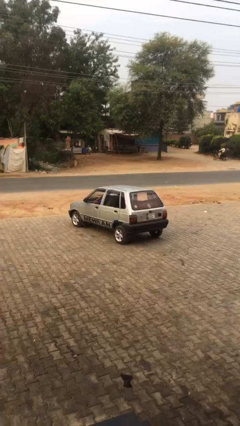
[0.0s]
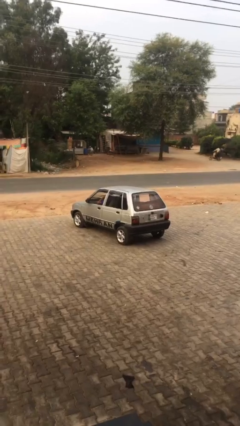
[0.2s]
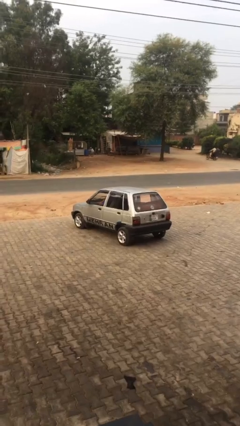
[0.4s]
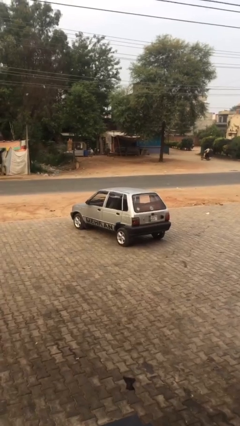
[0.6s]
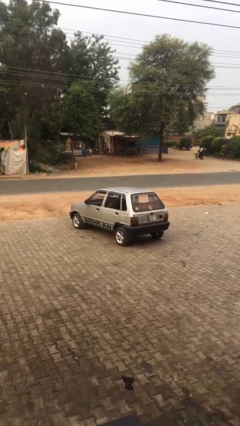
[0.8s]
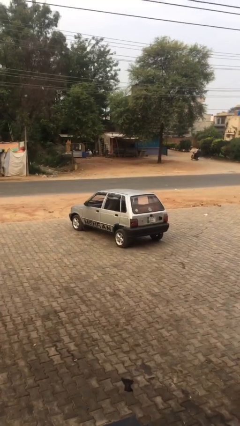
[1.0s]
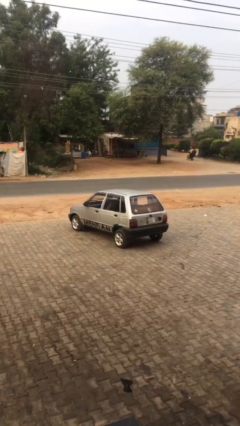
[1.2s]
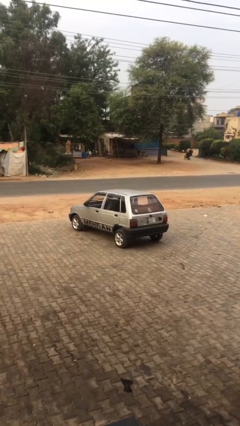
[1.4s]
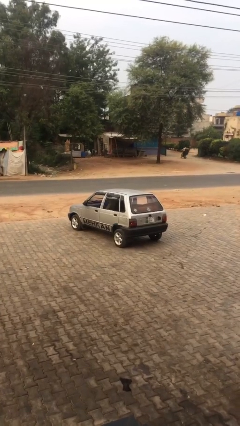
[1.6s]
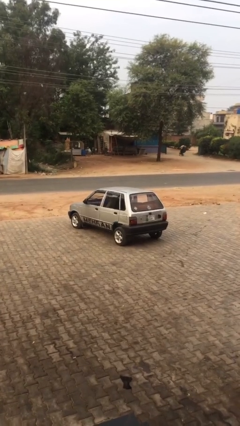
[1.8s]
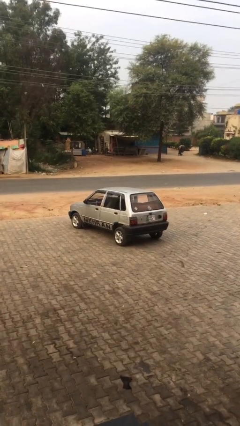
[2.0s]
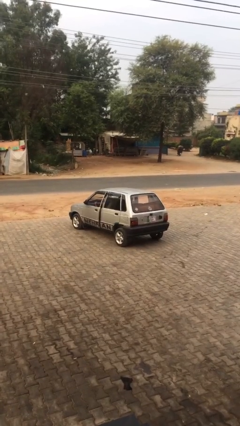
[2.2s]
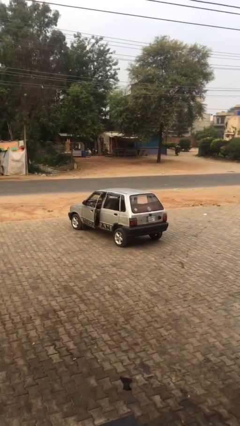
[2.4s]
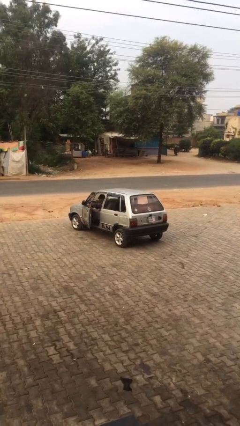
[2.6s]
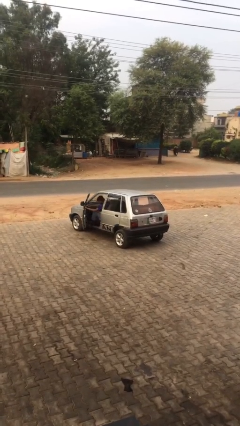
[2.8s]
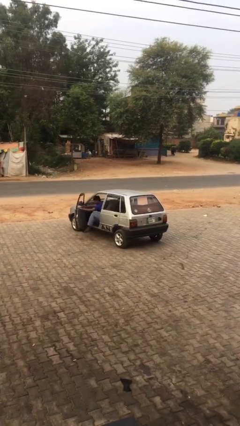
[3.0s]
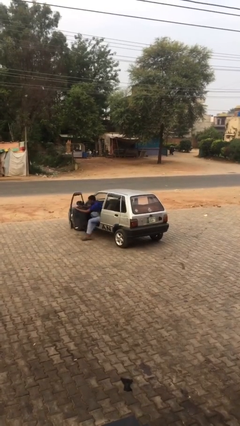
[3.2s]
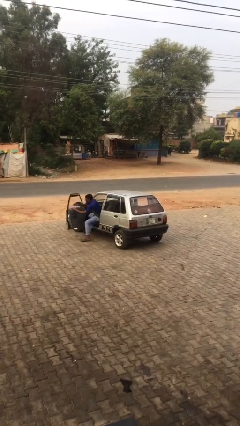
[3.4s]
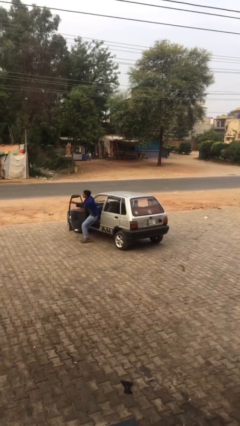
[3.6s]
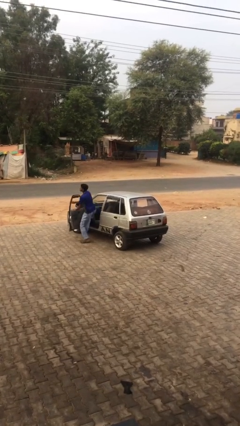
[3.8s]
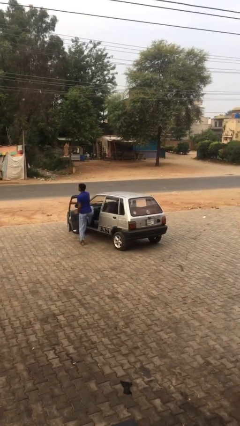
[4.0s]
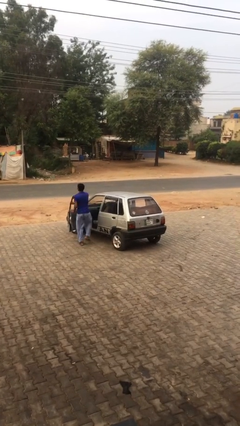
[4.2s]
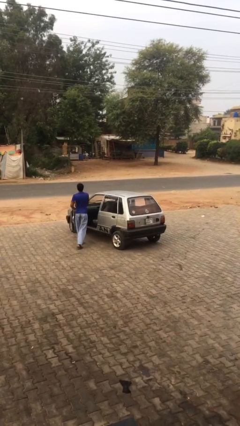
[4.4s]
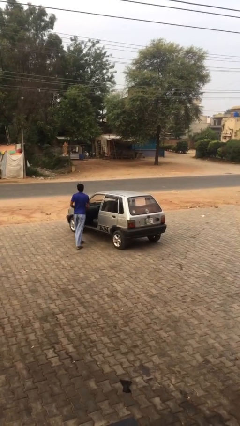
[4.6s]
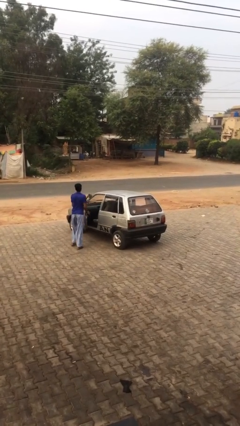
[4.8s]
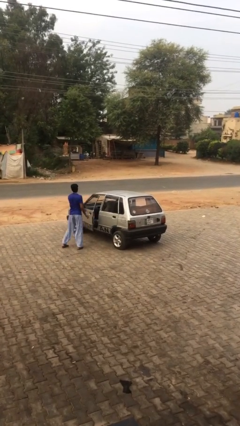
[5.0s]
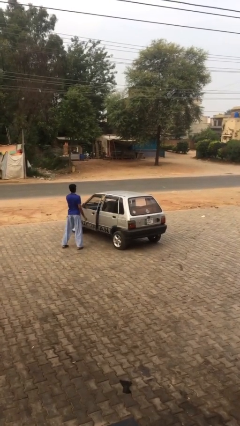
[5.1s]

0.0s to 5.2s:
car drops off person

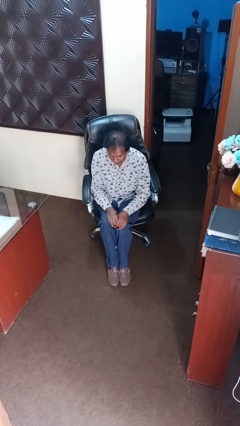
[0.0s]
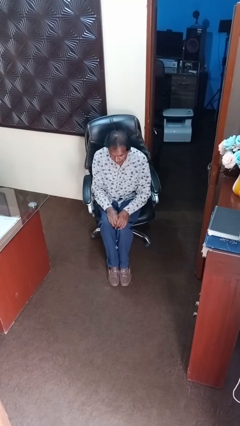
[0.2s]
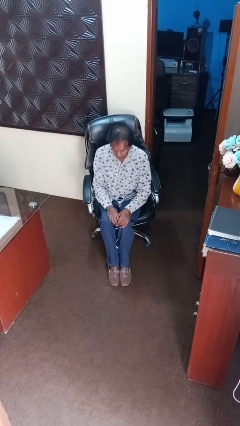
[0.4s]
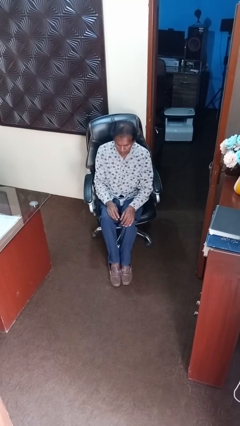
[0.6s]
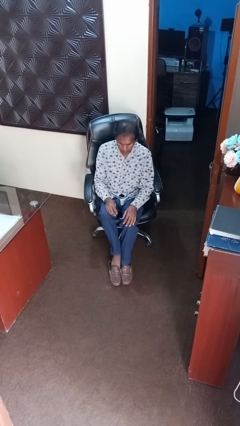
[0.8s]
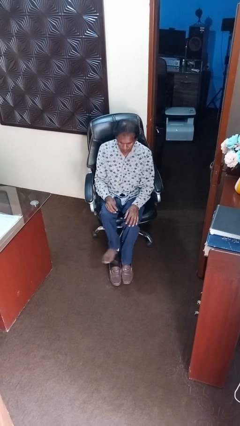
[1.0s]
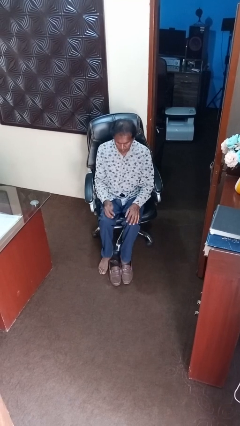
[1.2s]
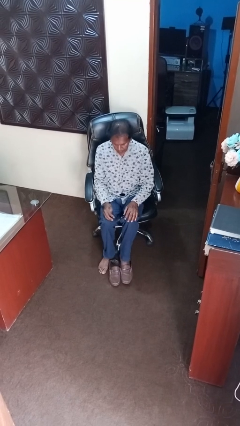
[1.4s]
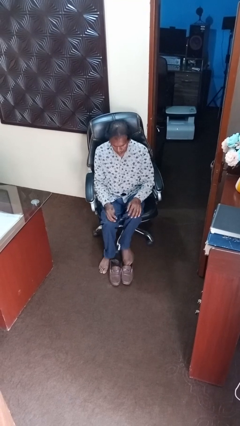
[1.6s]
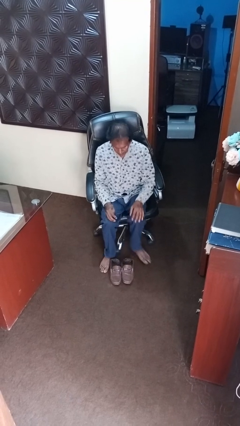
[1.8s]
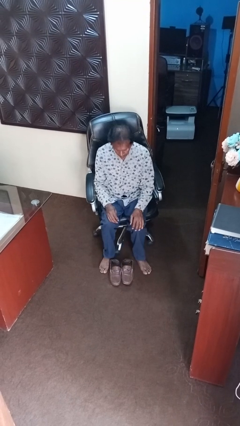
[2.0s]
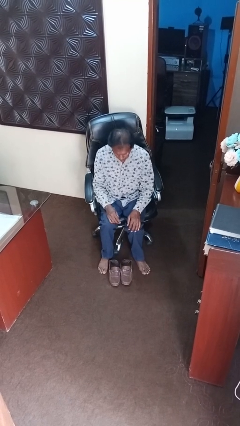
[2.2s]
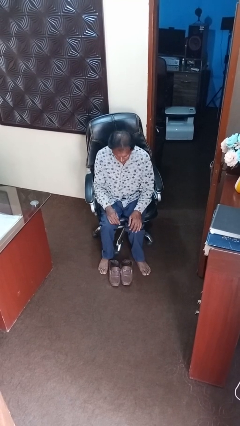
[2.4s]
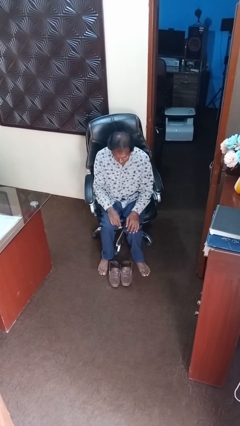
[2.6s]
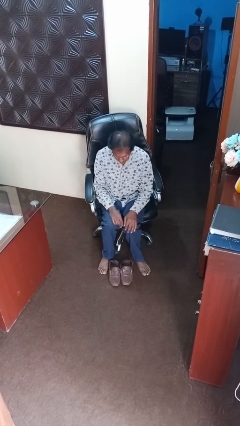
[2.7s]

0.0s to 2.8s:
person takes off shoes

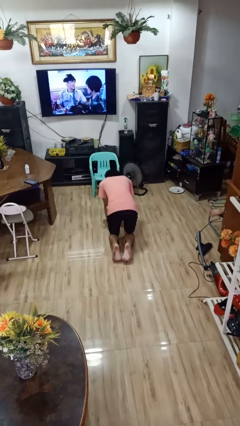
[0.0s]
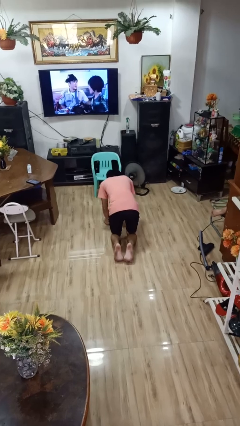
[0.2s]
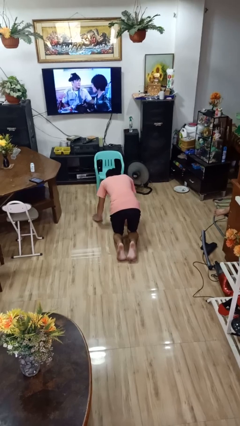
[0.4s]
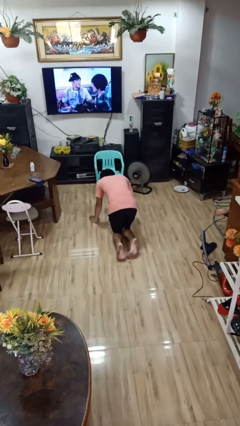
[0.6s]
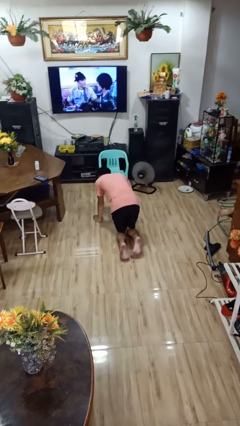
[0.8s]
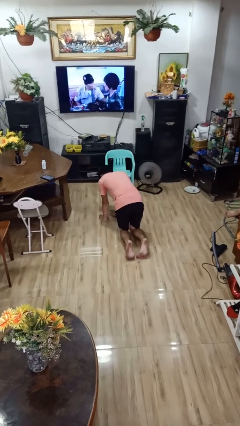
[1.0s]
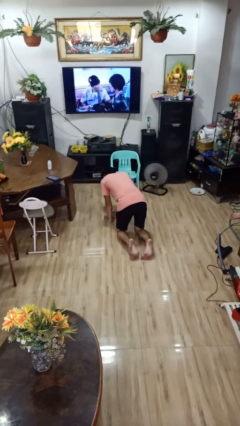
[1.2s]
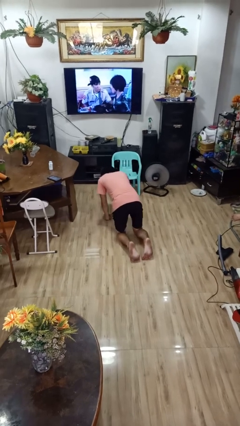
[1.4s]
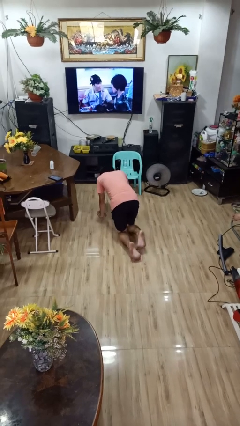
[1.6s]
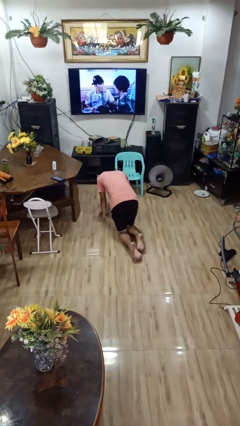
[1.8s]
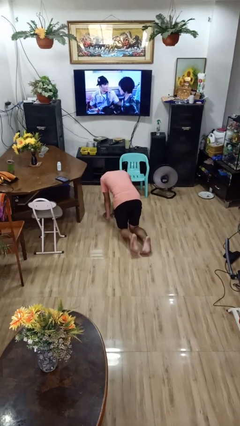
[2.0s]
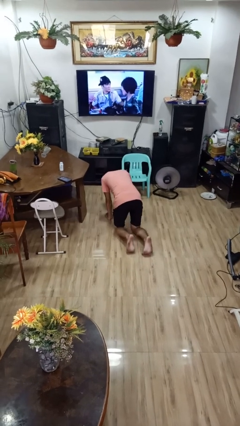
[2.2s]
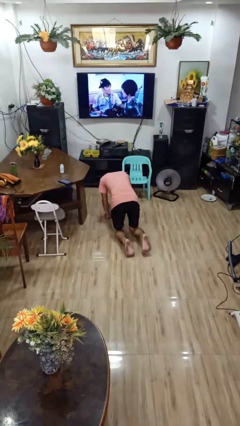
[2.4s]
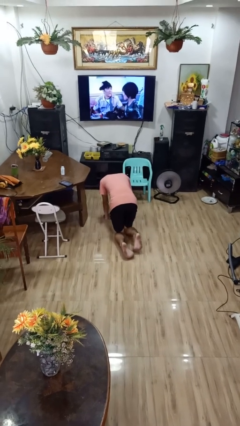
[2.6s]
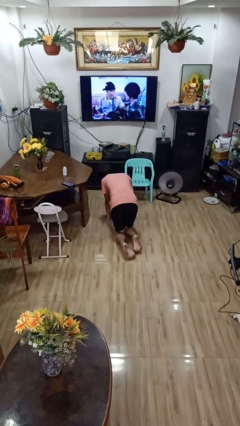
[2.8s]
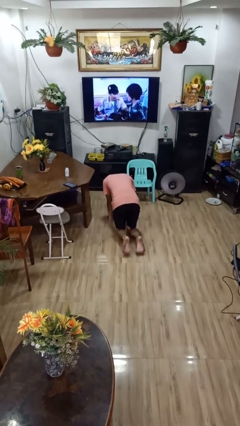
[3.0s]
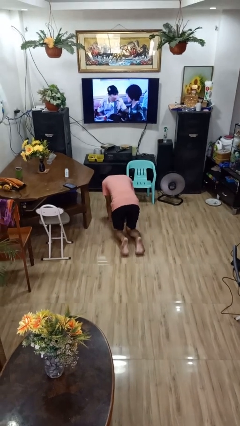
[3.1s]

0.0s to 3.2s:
person crawls

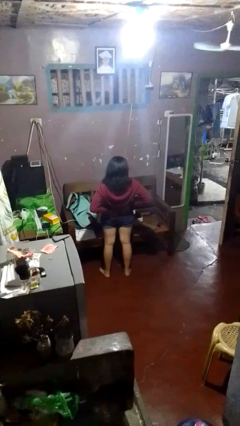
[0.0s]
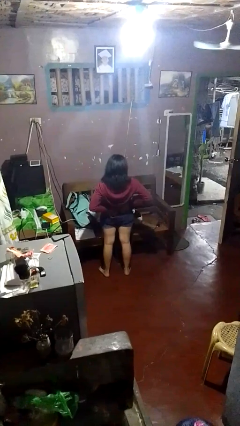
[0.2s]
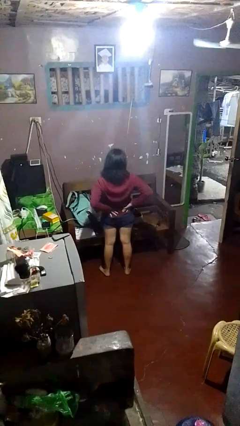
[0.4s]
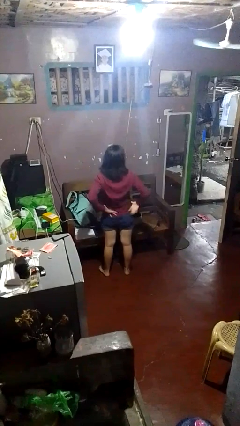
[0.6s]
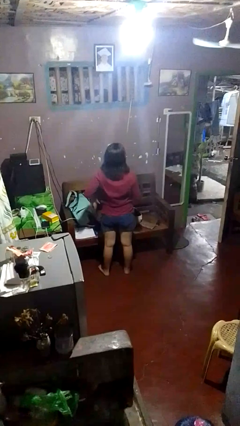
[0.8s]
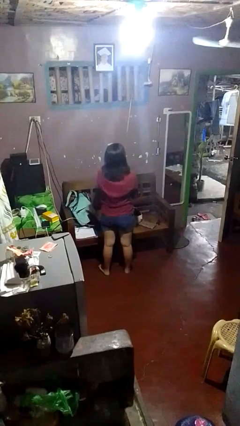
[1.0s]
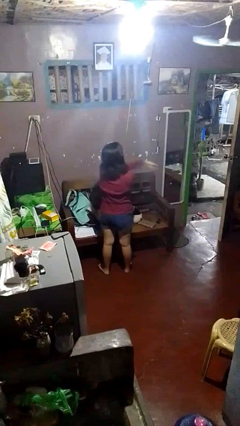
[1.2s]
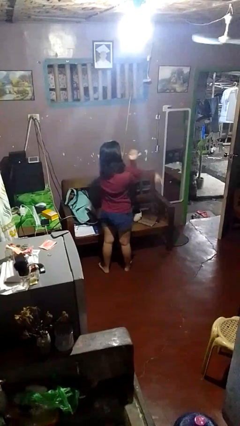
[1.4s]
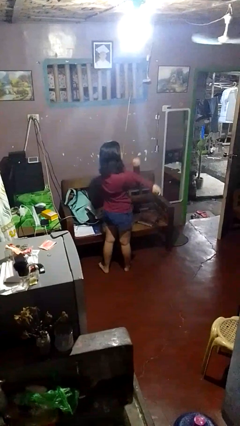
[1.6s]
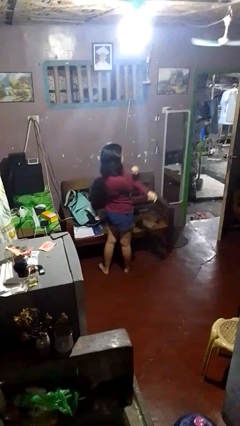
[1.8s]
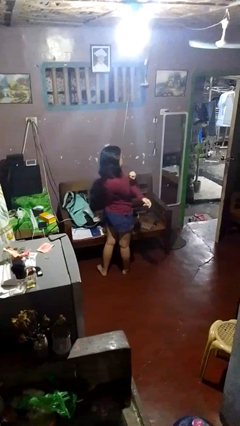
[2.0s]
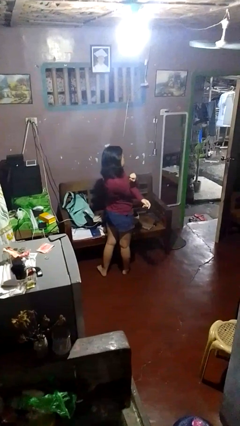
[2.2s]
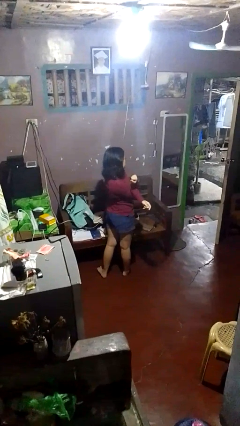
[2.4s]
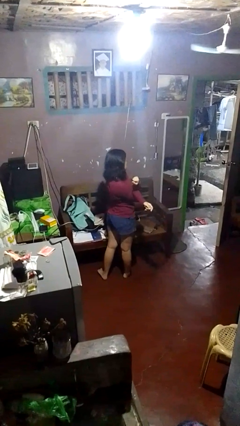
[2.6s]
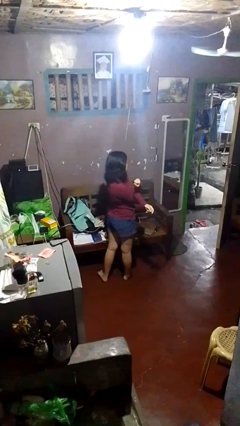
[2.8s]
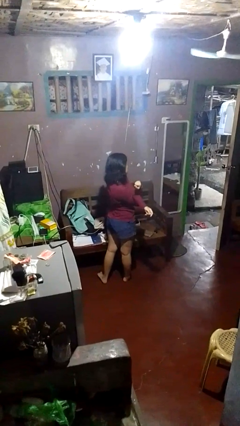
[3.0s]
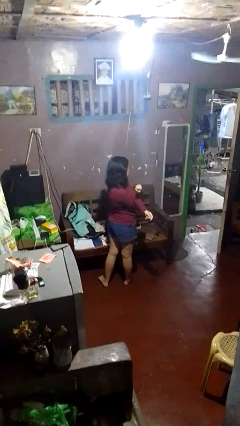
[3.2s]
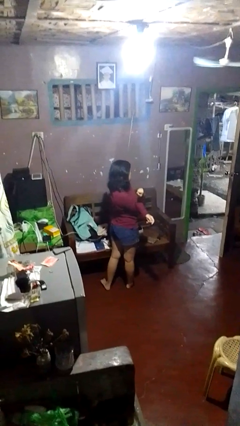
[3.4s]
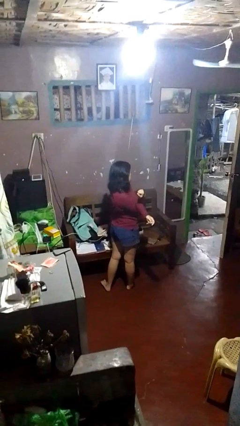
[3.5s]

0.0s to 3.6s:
person stretches arms to side

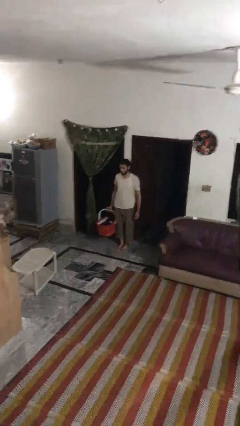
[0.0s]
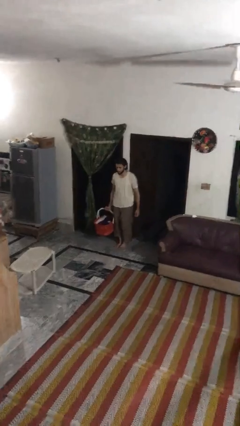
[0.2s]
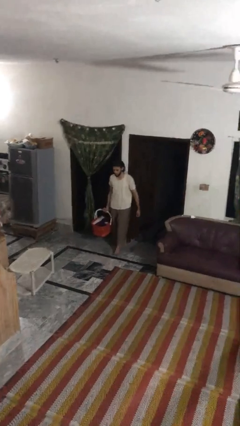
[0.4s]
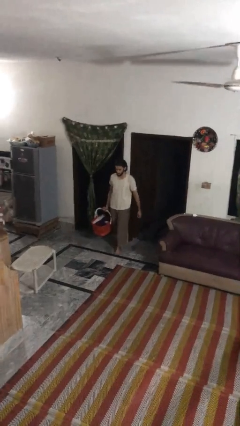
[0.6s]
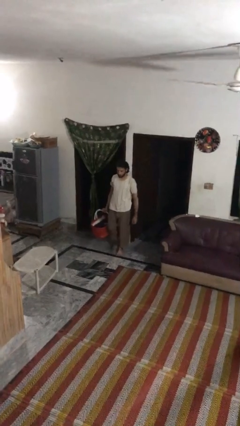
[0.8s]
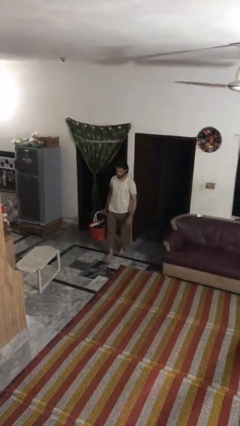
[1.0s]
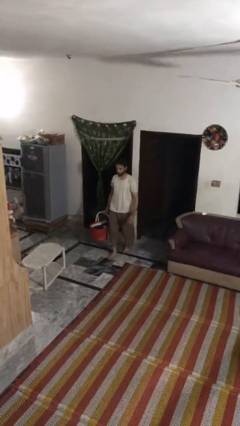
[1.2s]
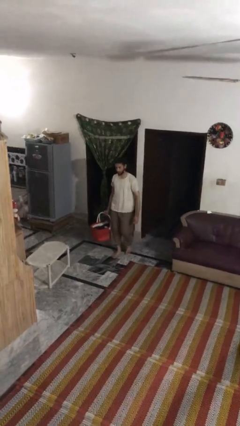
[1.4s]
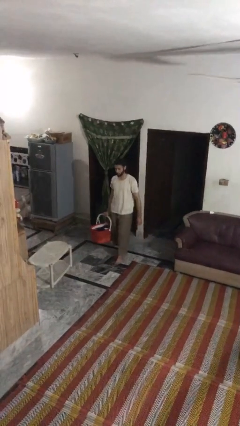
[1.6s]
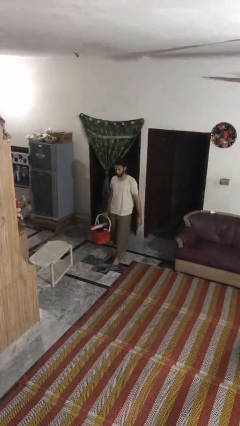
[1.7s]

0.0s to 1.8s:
person carries laundry basket

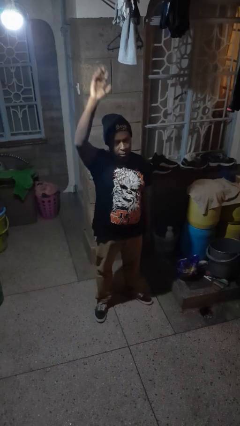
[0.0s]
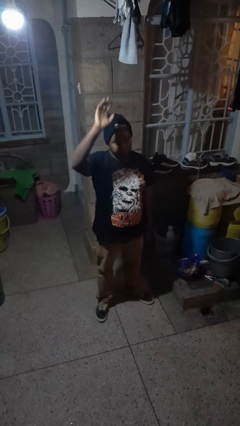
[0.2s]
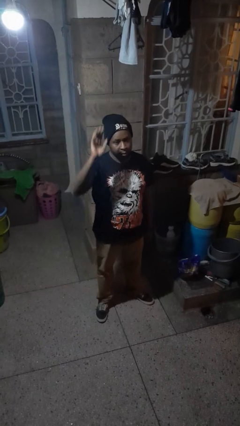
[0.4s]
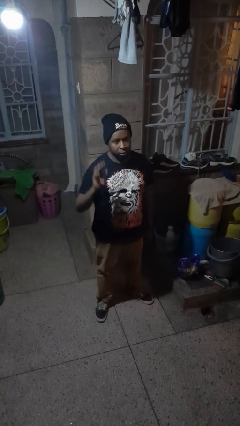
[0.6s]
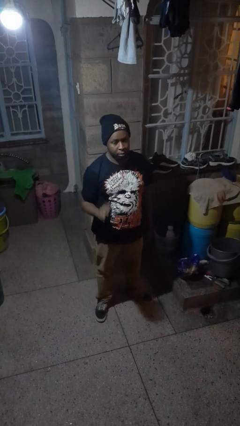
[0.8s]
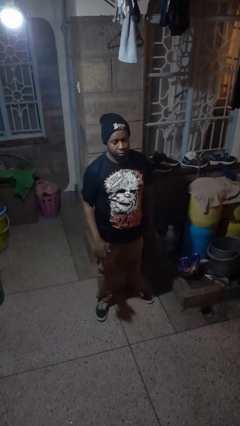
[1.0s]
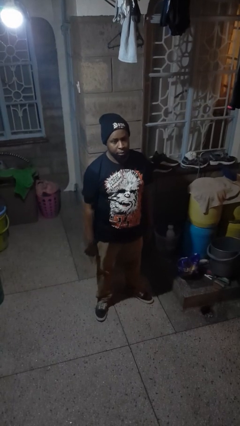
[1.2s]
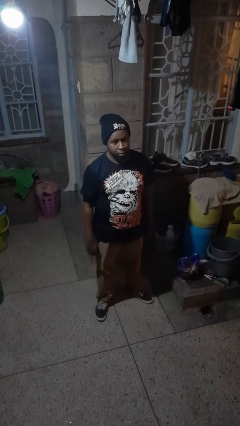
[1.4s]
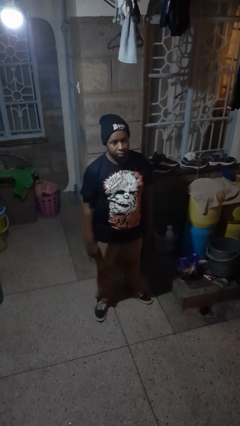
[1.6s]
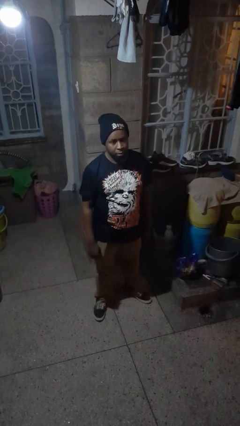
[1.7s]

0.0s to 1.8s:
person gestures lower hand
